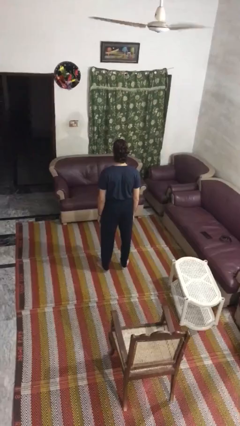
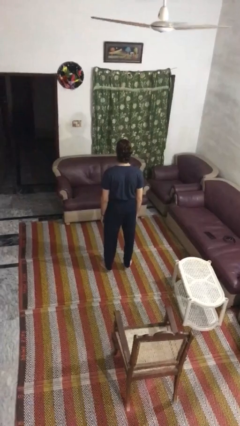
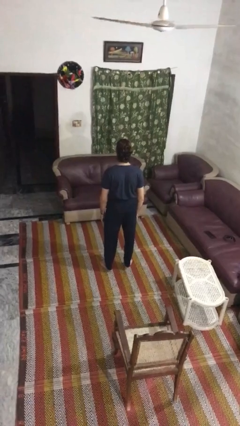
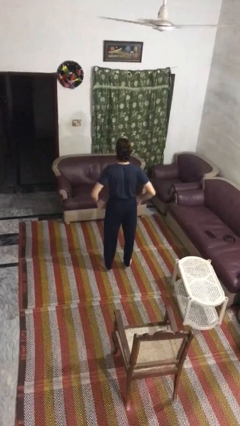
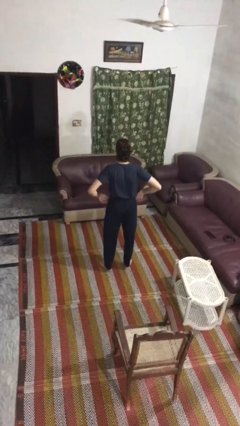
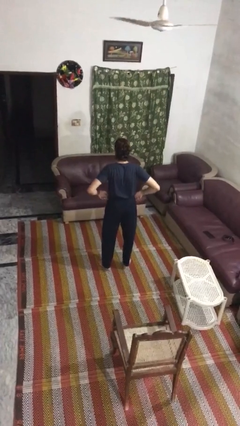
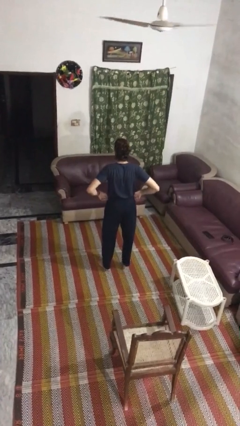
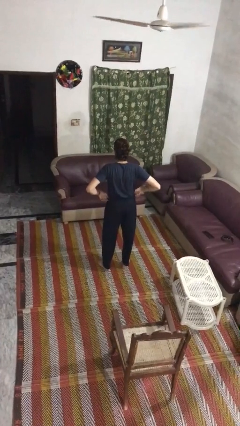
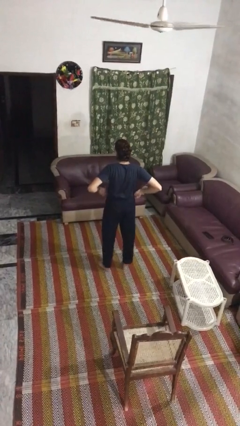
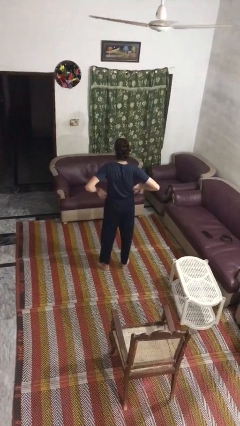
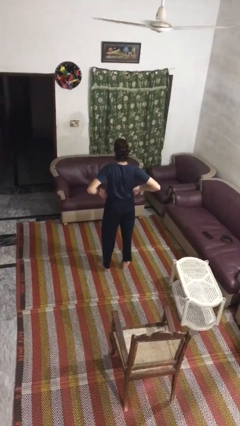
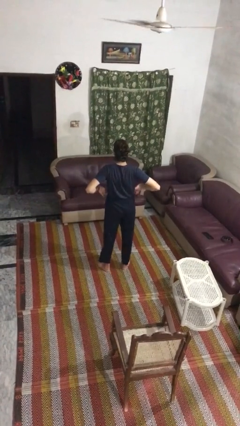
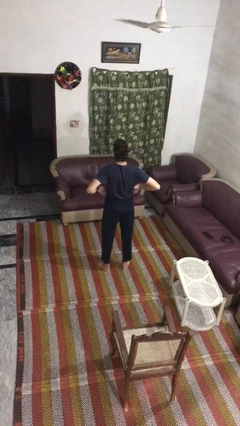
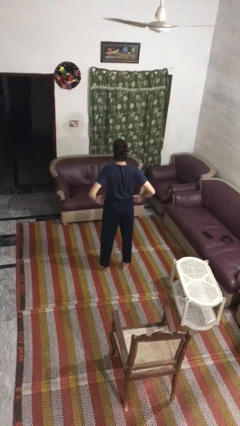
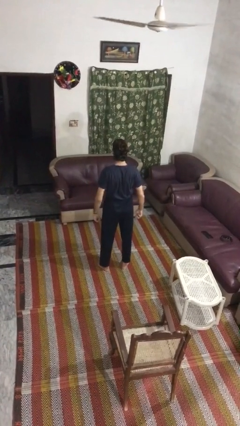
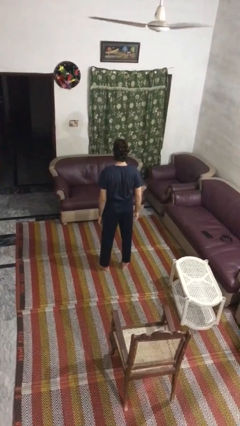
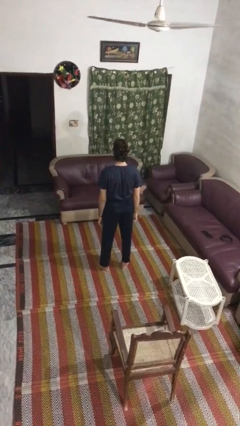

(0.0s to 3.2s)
person hikes up pants

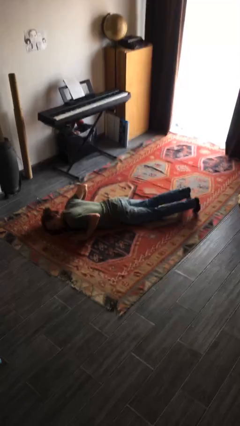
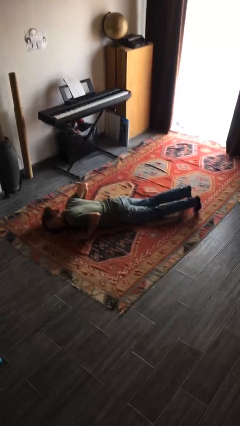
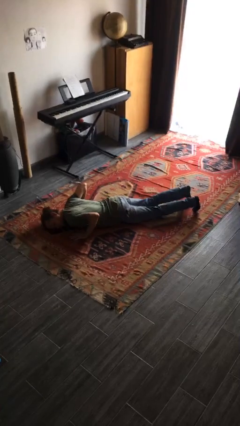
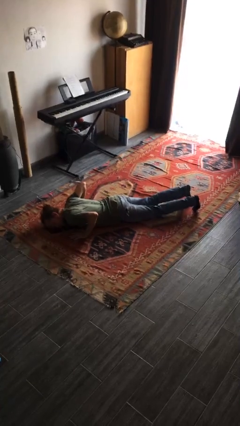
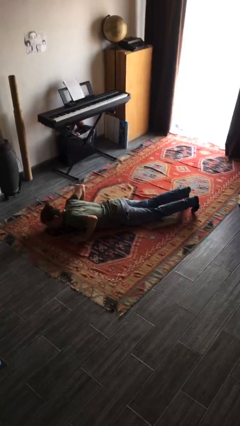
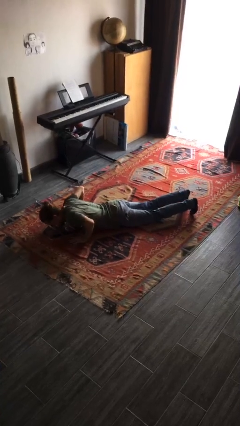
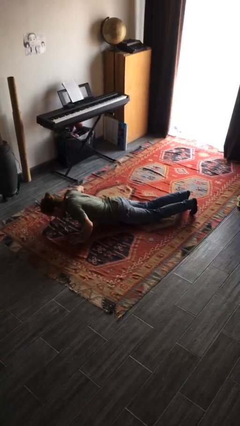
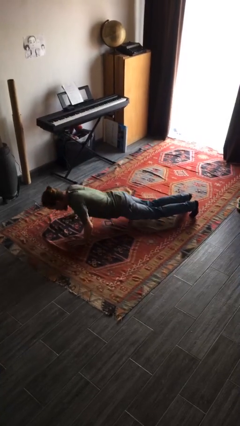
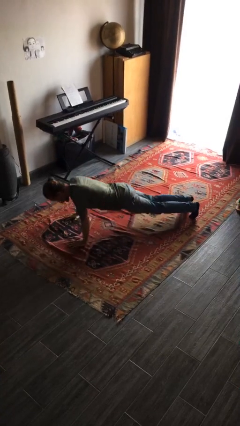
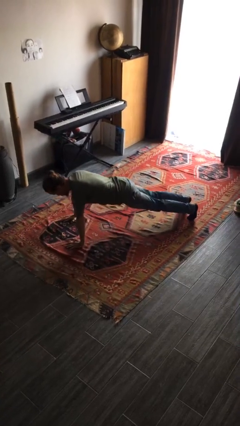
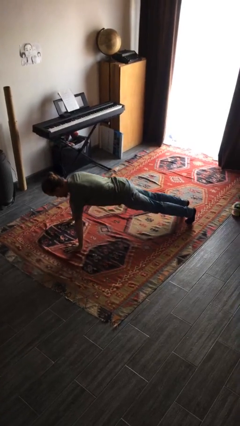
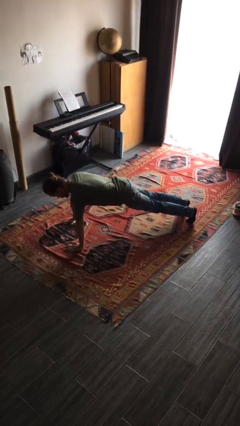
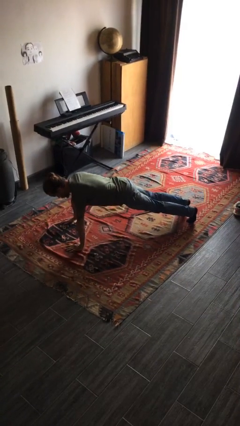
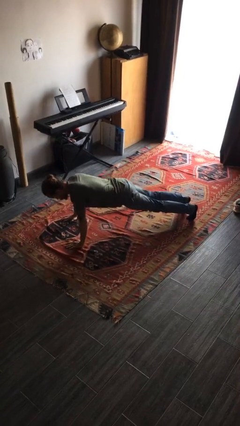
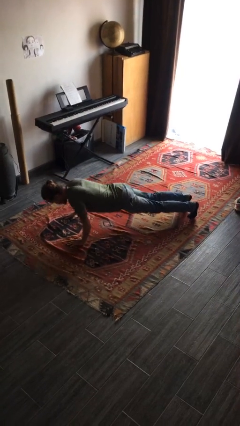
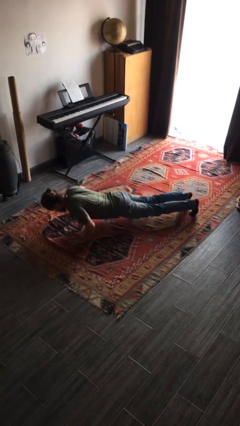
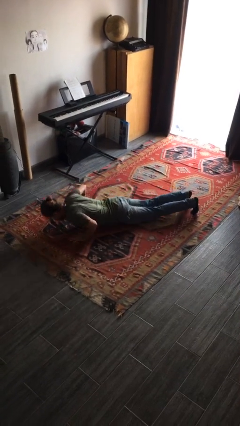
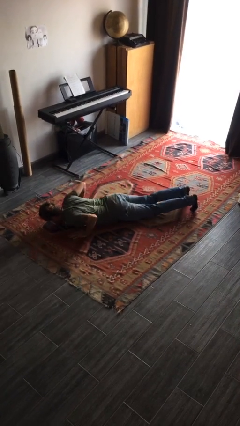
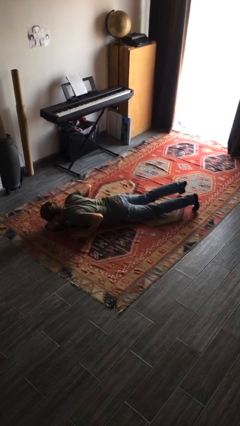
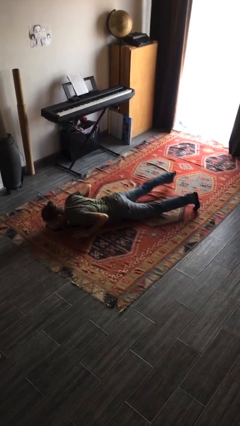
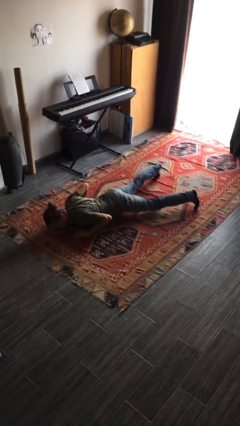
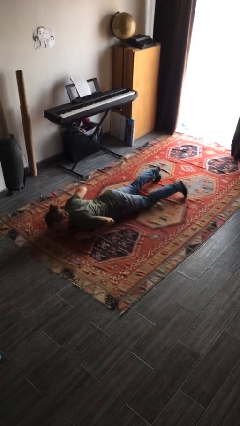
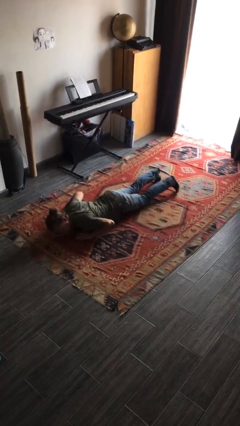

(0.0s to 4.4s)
person exercises with pushup

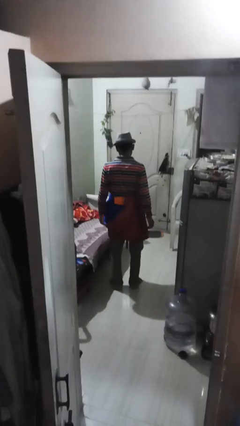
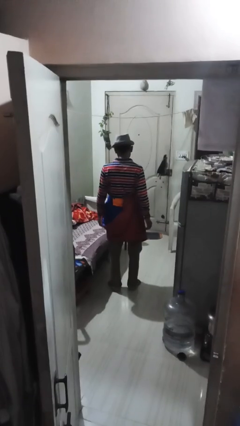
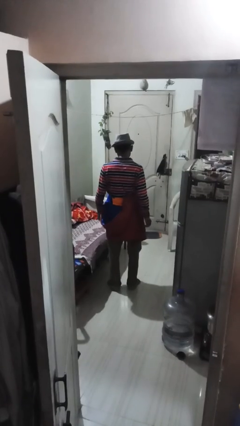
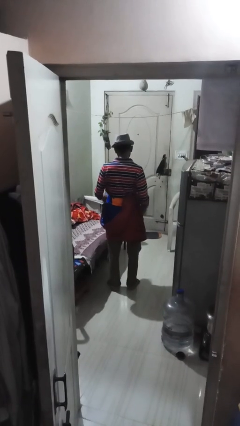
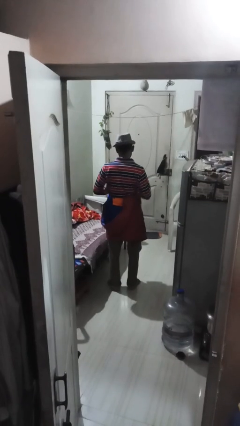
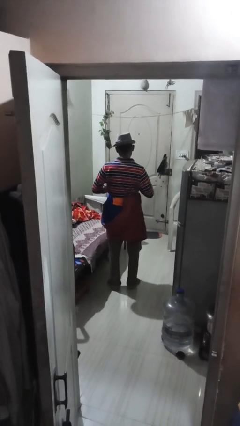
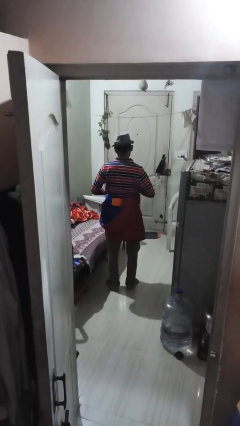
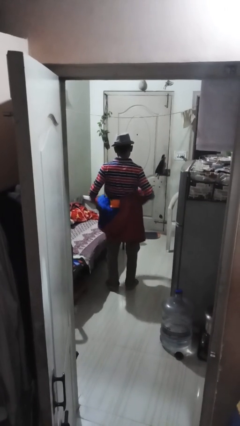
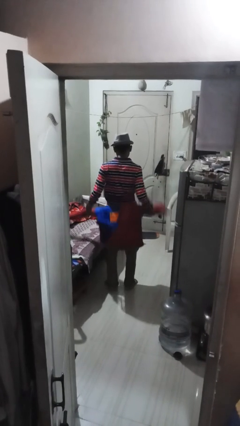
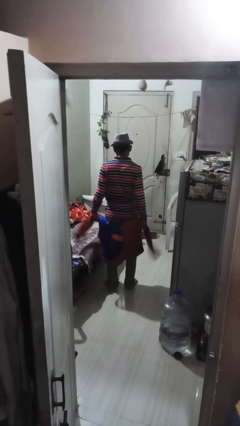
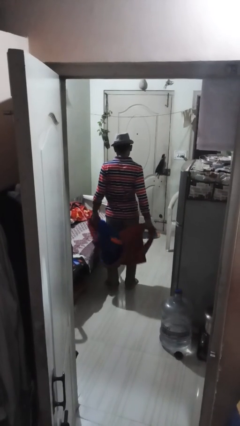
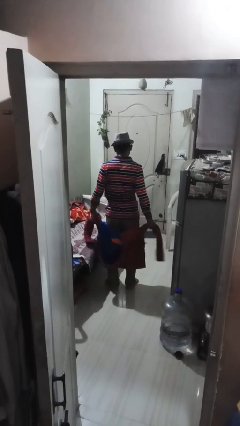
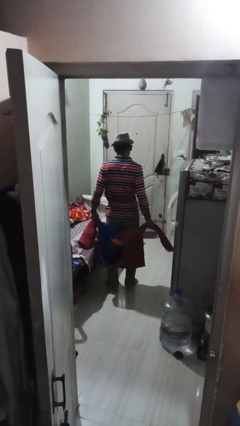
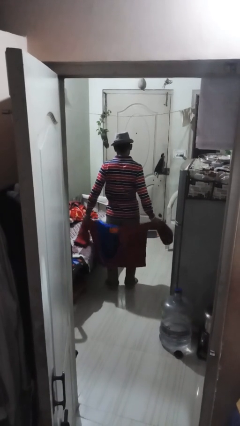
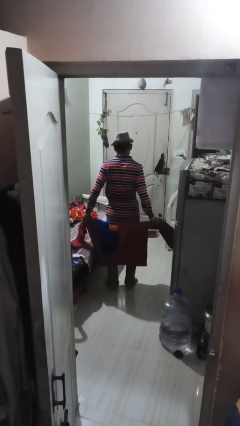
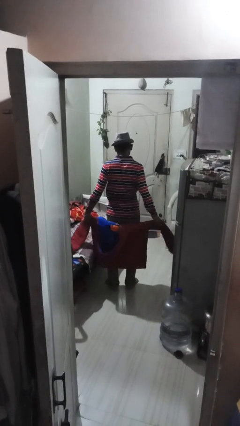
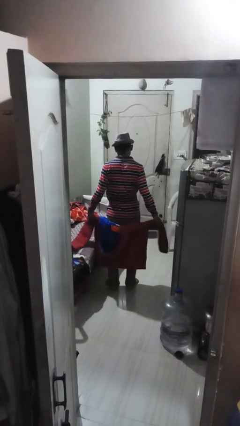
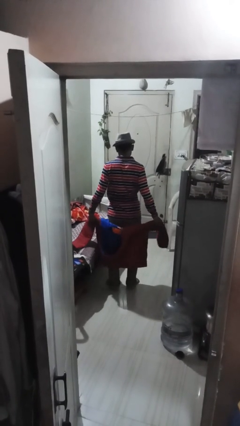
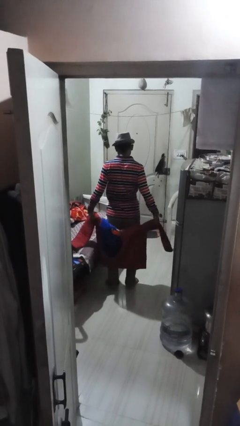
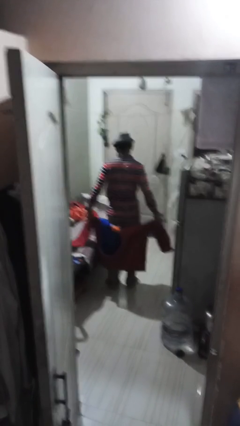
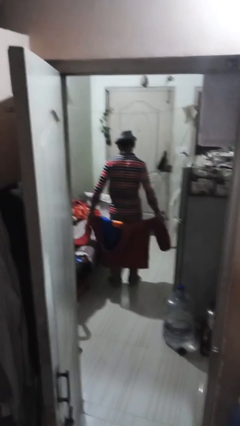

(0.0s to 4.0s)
person unties jacket around waist

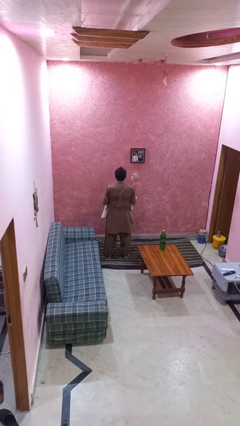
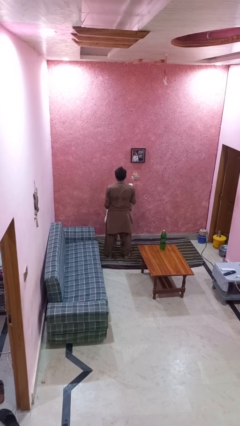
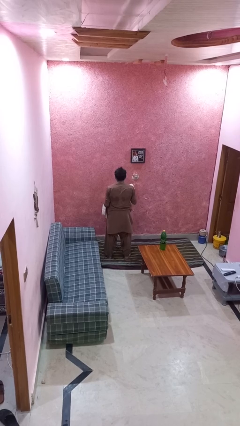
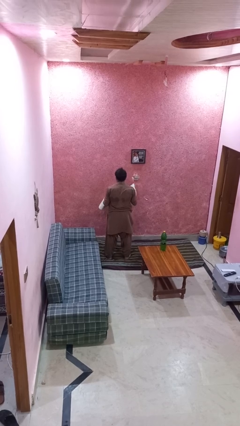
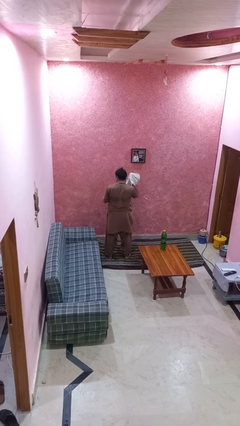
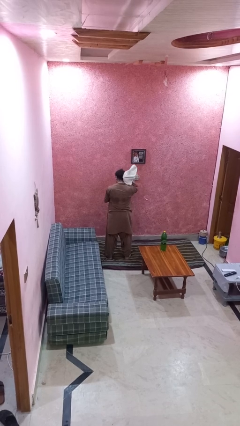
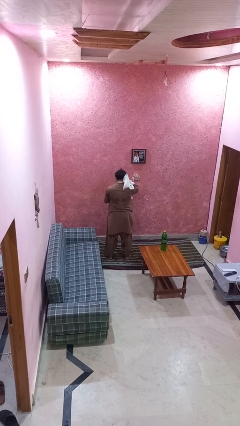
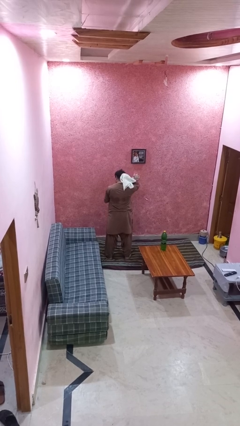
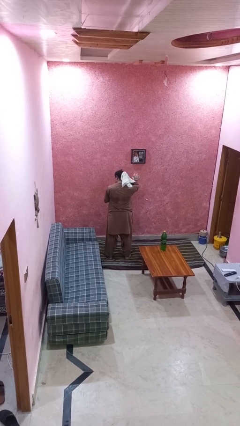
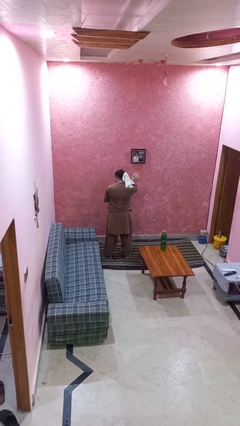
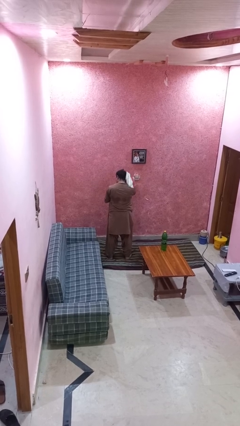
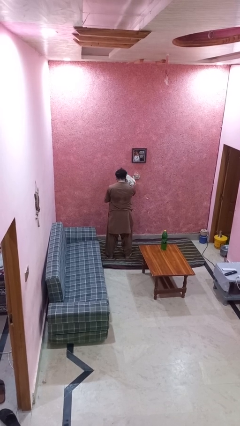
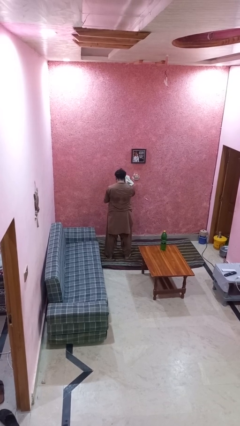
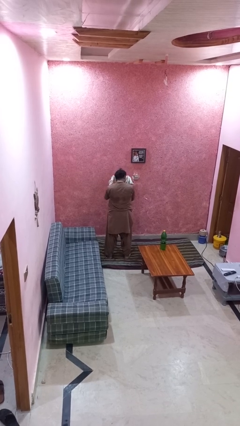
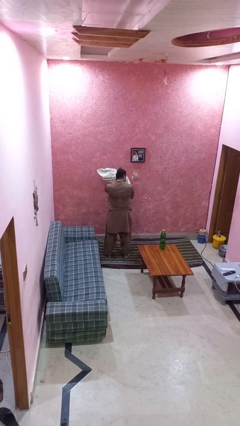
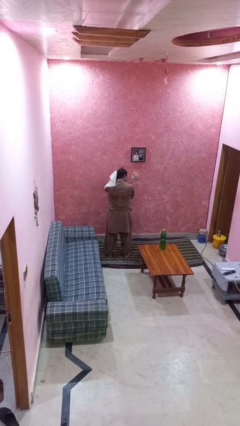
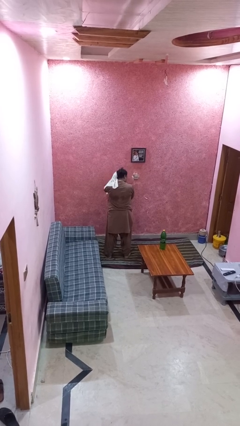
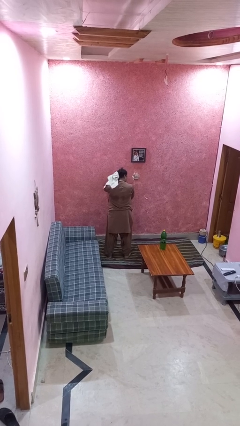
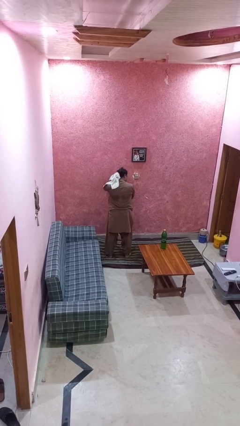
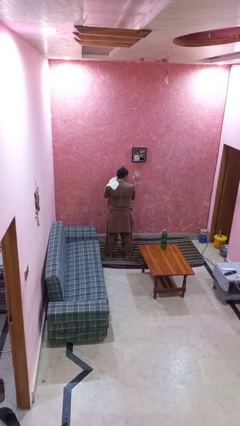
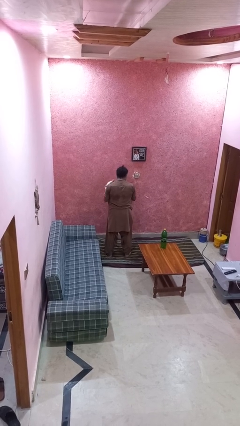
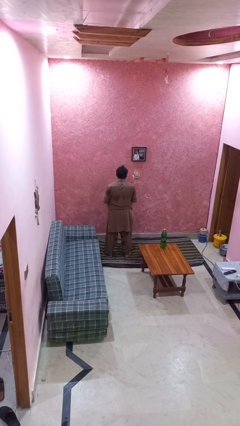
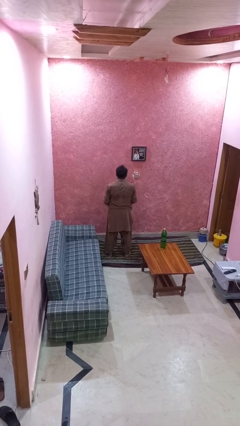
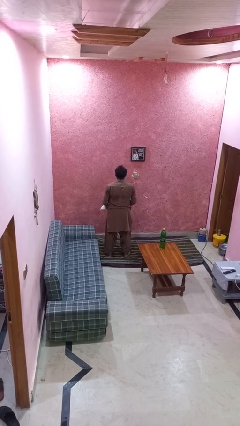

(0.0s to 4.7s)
person dries hair with towel

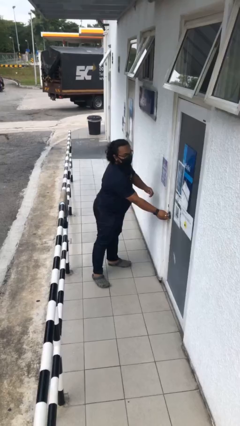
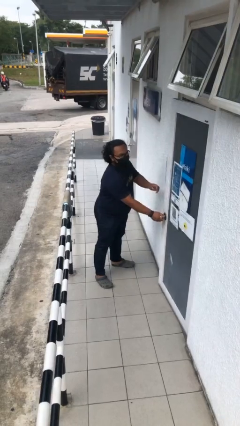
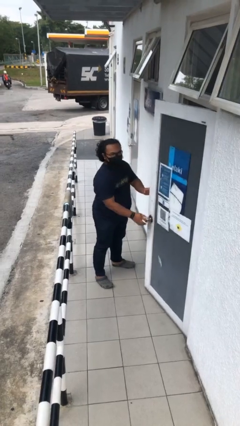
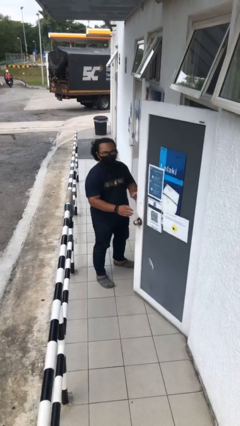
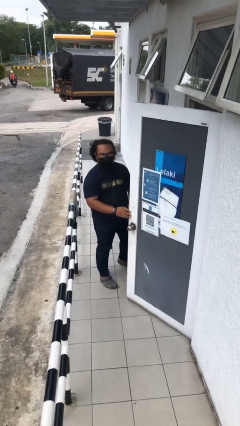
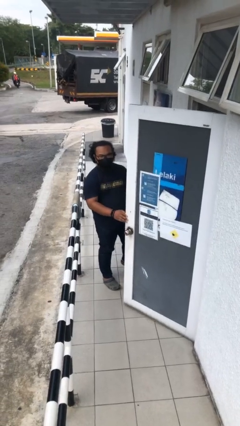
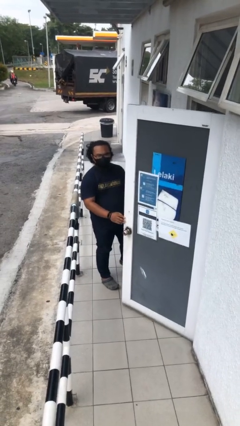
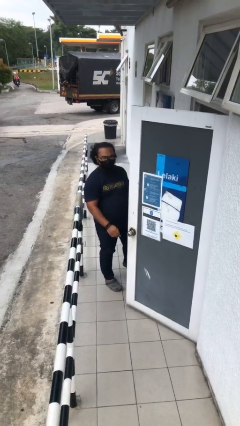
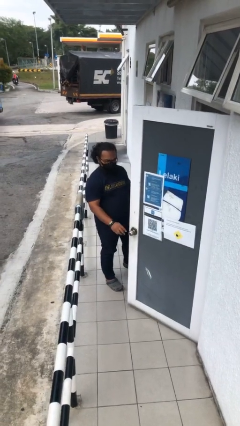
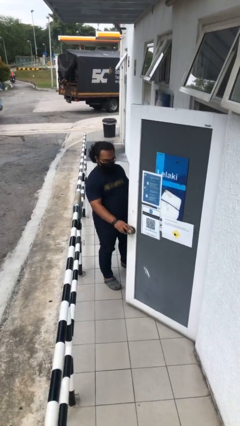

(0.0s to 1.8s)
person opens facility door
